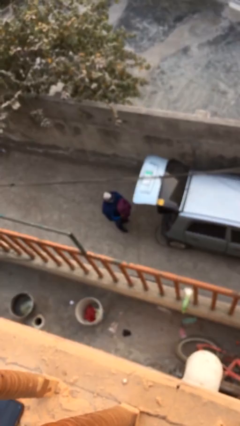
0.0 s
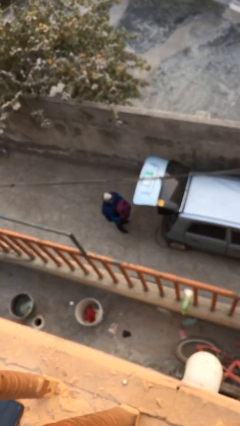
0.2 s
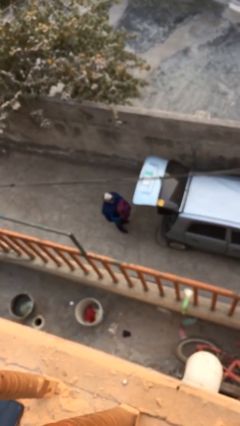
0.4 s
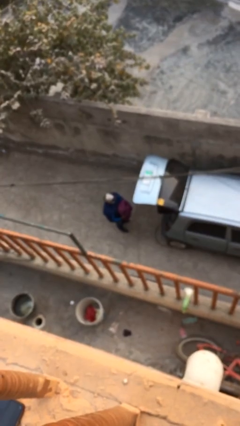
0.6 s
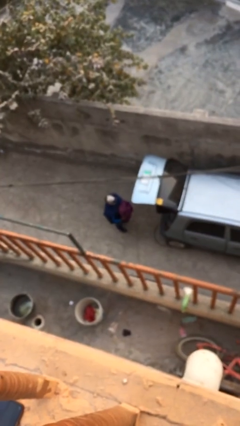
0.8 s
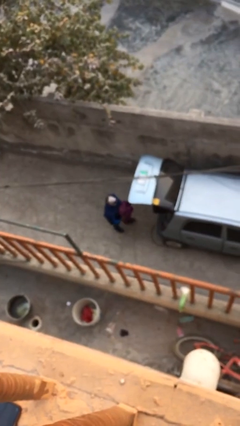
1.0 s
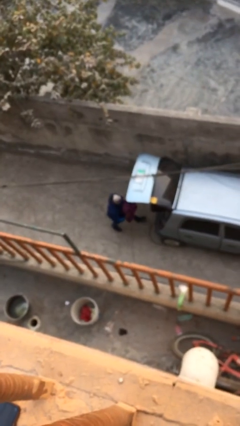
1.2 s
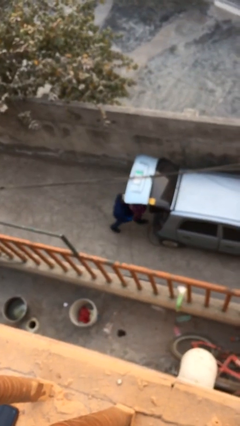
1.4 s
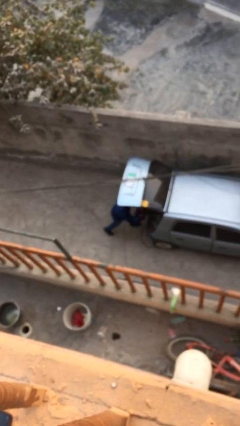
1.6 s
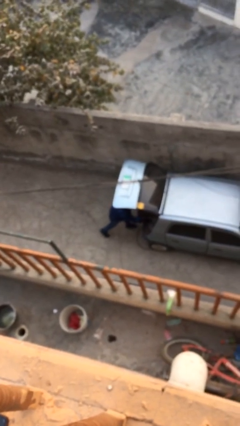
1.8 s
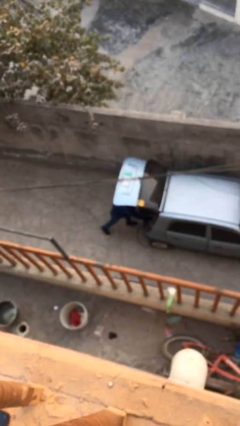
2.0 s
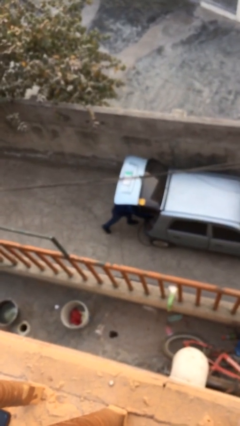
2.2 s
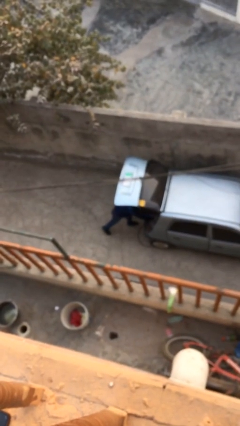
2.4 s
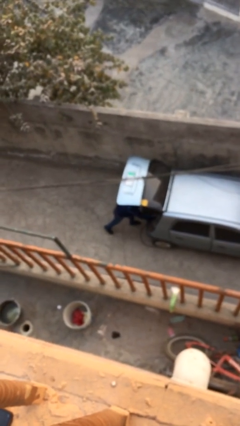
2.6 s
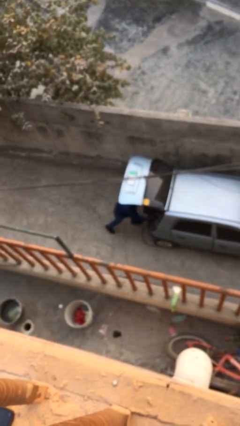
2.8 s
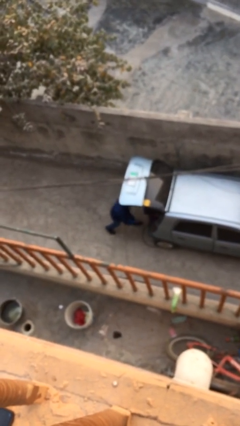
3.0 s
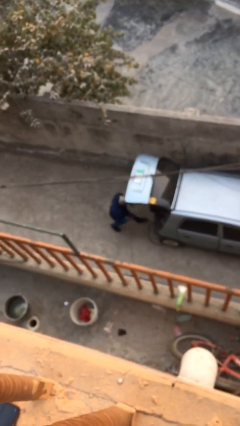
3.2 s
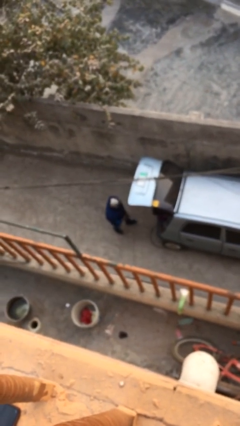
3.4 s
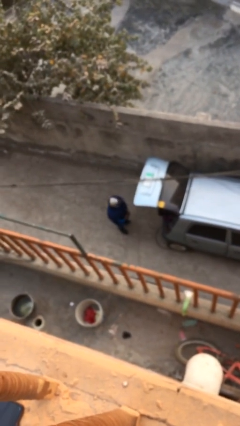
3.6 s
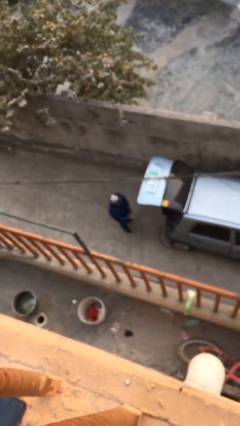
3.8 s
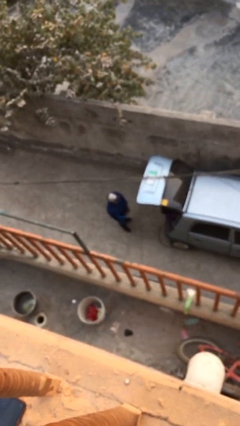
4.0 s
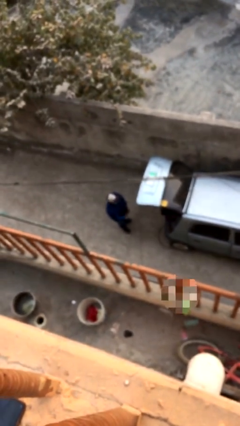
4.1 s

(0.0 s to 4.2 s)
person loads car

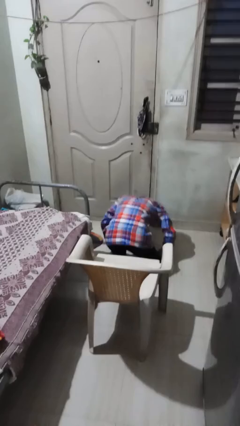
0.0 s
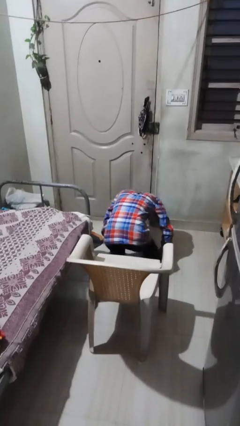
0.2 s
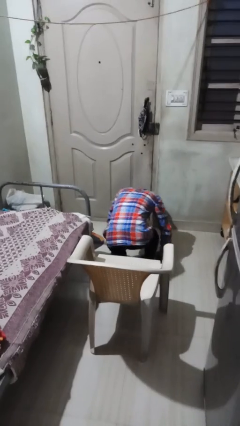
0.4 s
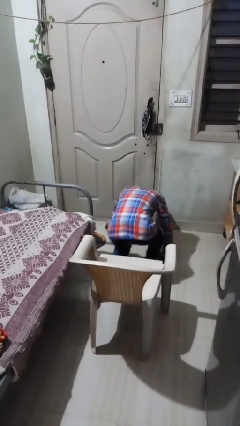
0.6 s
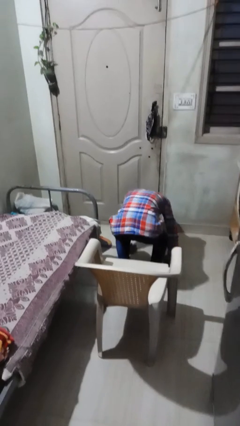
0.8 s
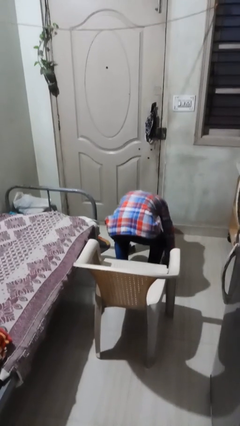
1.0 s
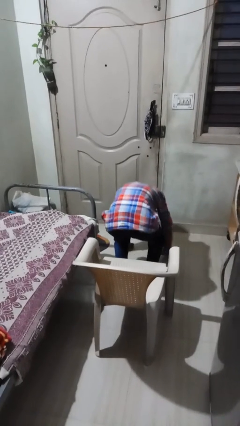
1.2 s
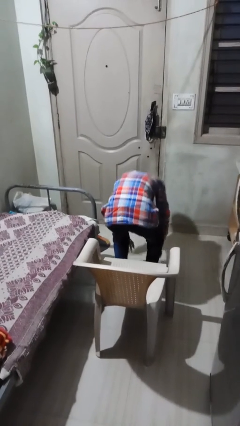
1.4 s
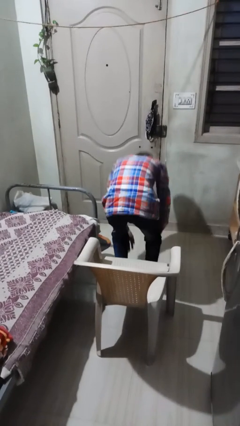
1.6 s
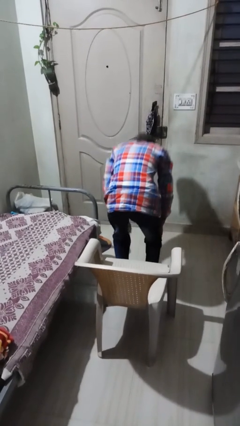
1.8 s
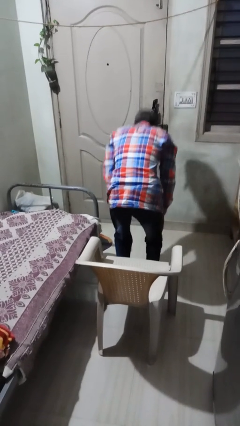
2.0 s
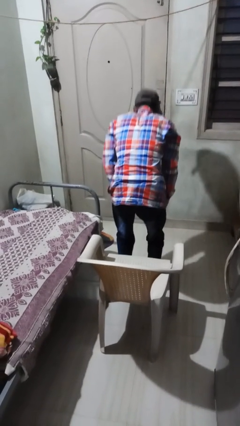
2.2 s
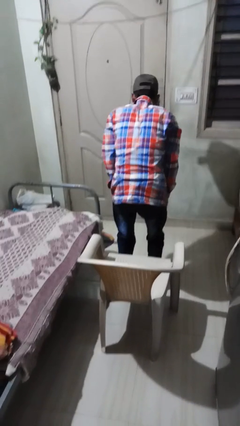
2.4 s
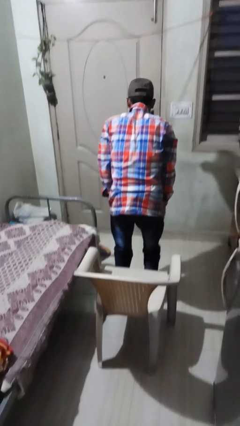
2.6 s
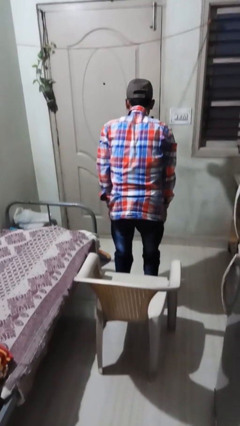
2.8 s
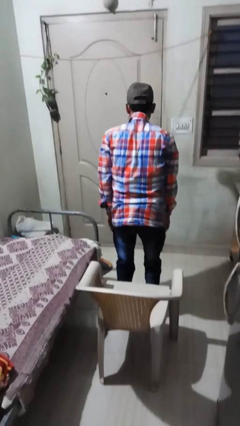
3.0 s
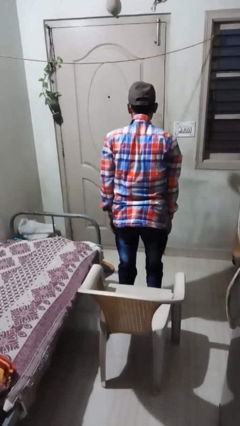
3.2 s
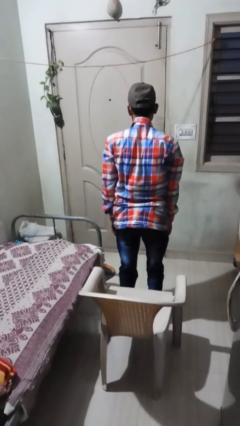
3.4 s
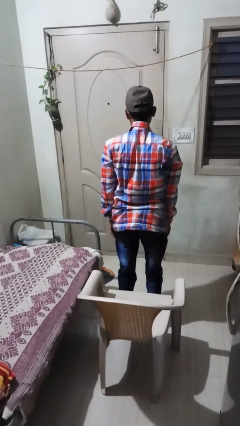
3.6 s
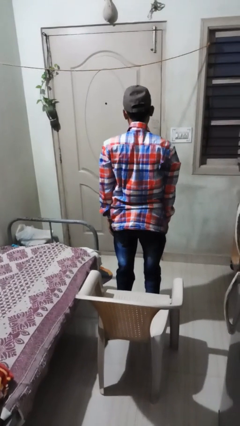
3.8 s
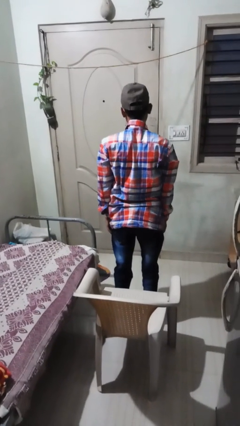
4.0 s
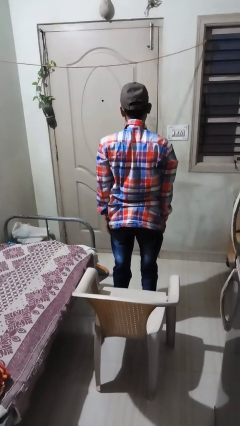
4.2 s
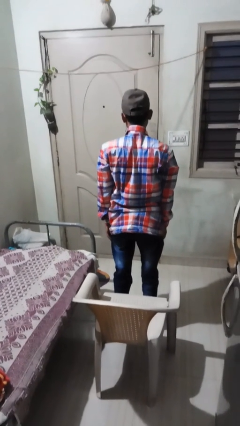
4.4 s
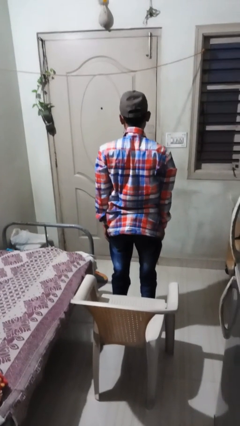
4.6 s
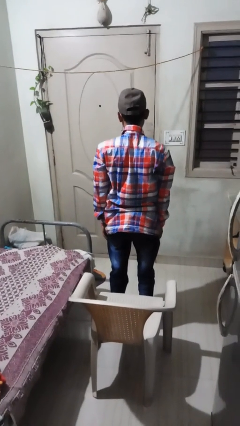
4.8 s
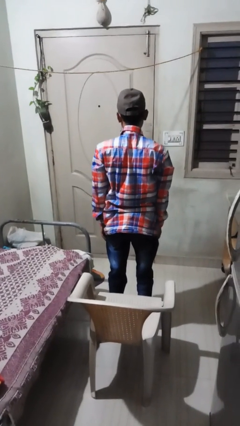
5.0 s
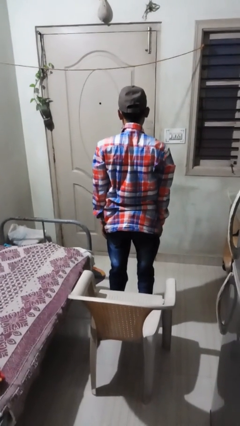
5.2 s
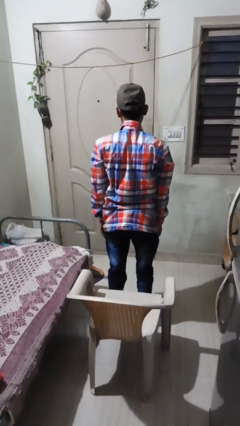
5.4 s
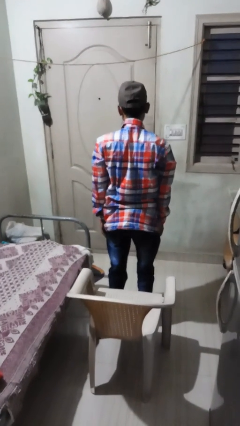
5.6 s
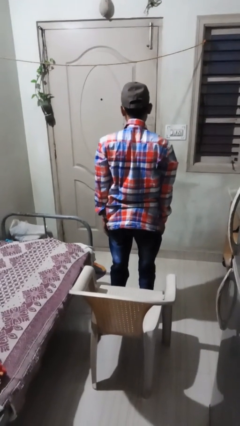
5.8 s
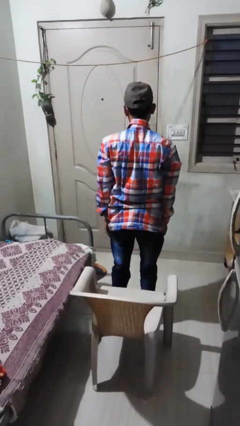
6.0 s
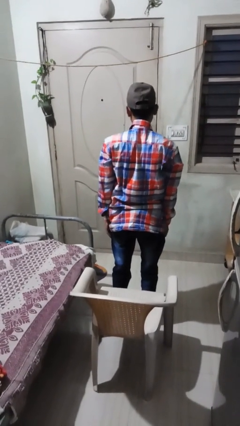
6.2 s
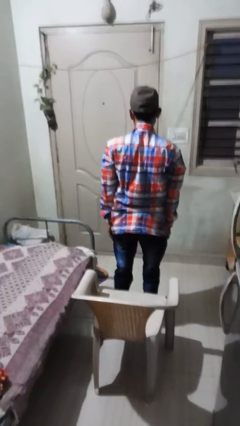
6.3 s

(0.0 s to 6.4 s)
person stands up from floor

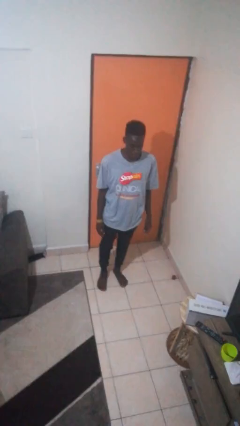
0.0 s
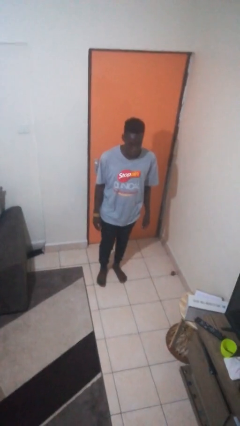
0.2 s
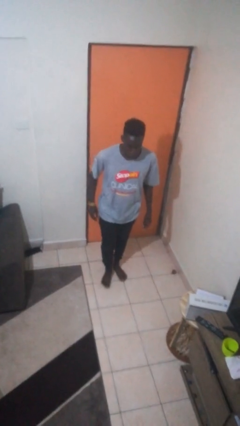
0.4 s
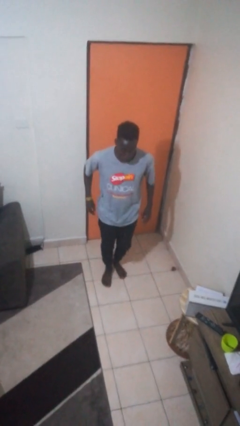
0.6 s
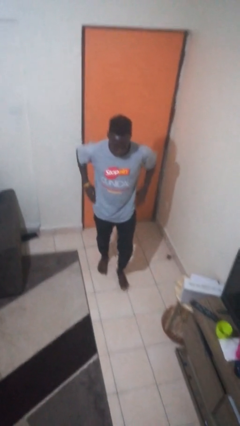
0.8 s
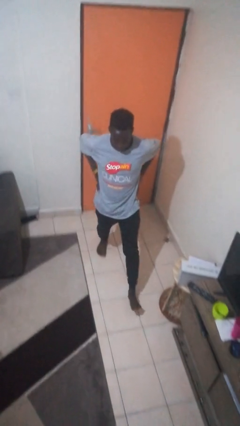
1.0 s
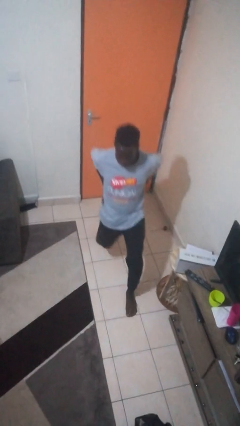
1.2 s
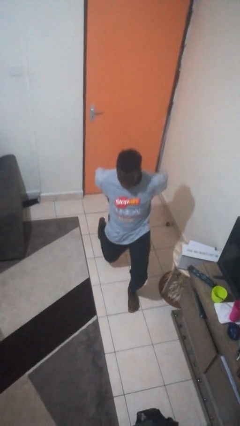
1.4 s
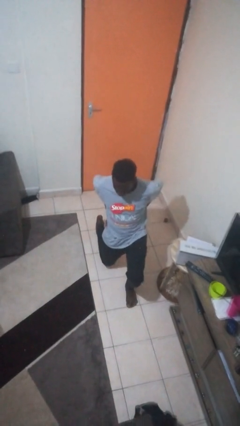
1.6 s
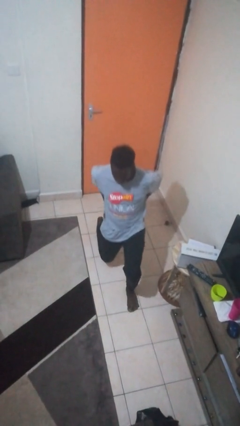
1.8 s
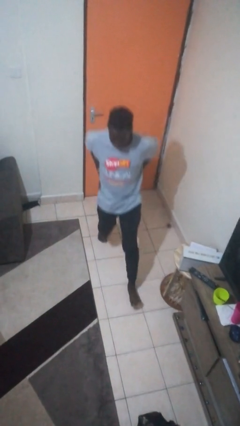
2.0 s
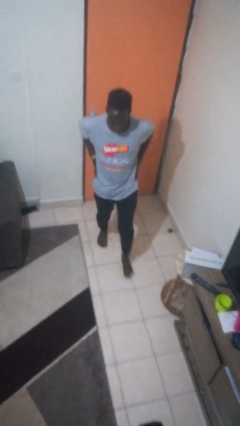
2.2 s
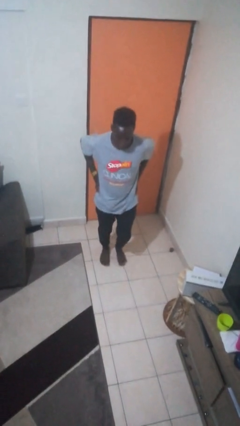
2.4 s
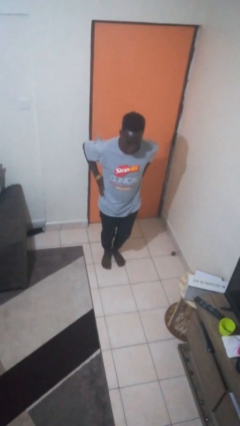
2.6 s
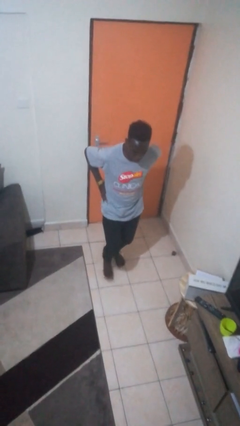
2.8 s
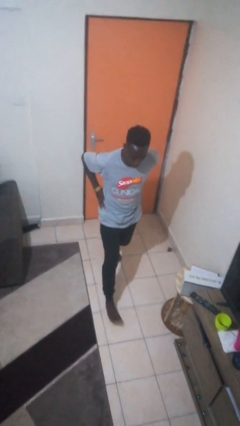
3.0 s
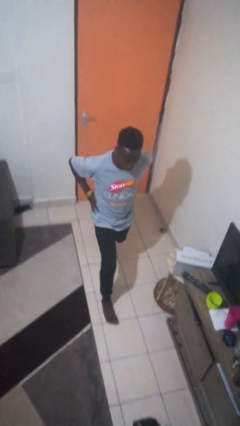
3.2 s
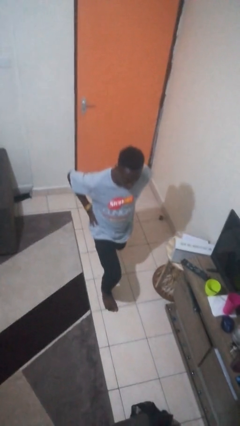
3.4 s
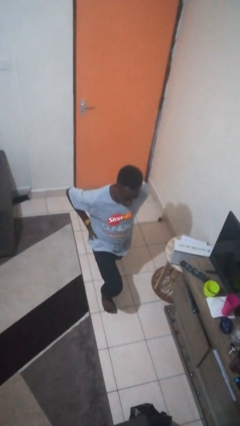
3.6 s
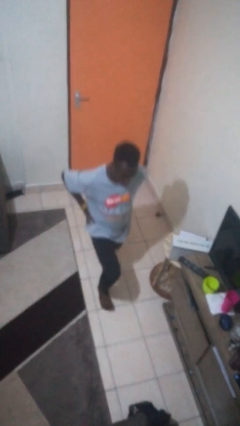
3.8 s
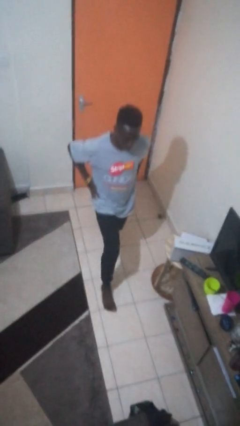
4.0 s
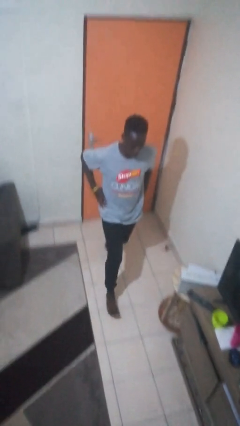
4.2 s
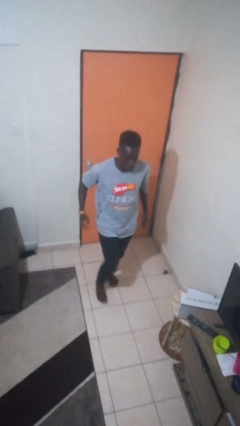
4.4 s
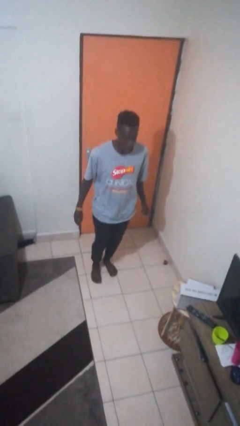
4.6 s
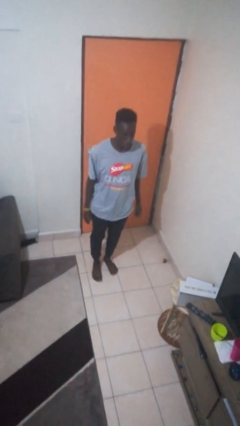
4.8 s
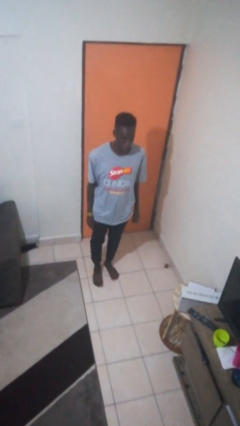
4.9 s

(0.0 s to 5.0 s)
person exercises with lunges

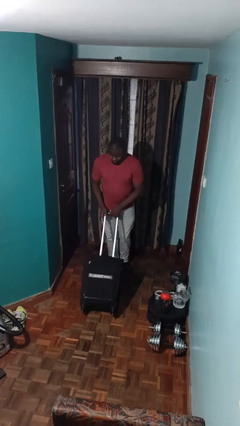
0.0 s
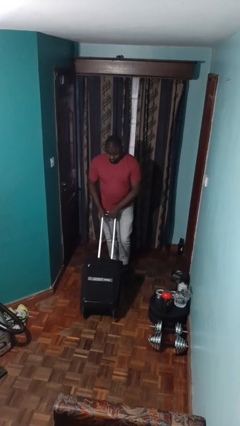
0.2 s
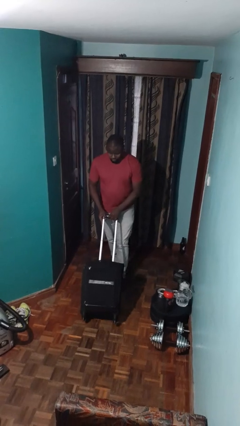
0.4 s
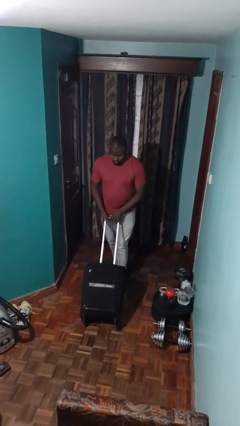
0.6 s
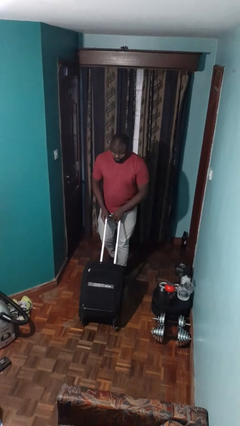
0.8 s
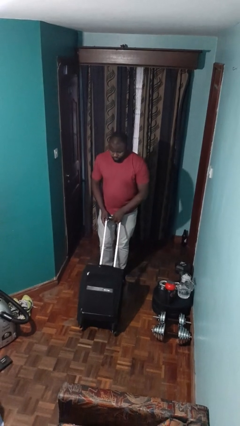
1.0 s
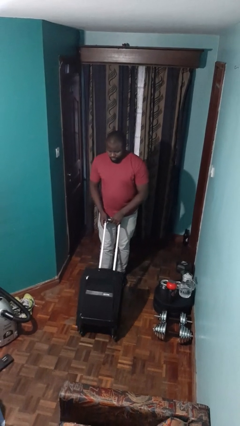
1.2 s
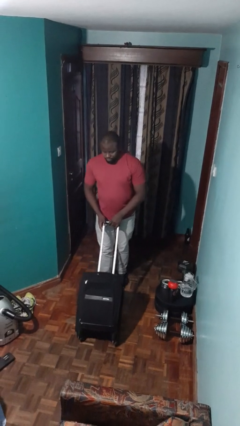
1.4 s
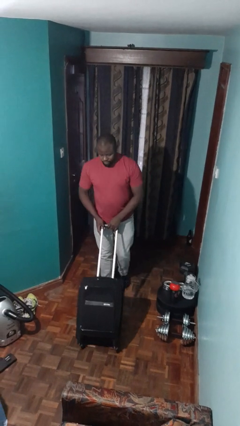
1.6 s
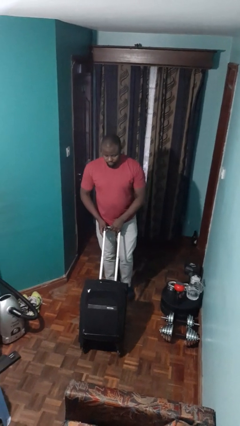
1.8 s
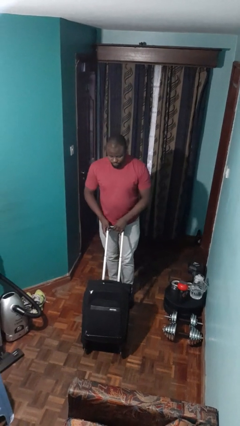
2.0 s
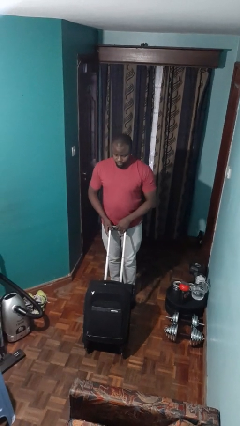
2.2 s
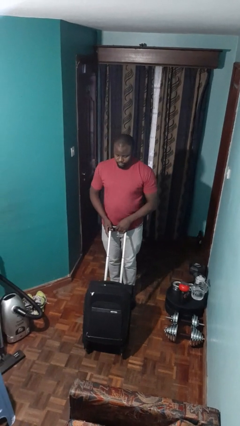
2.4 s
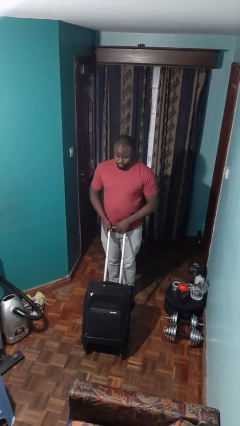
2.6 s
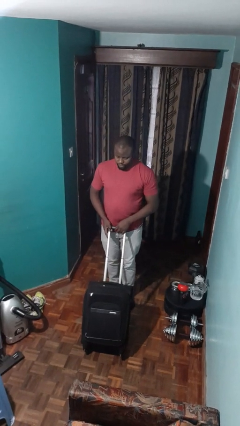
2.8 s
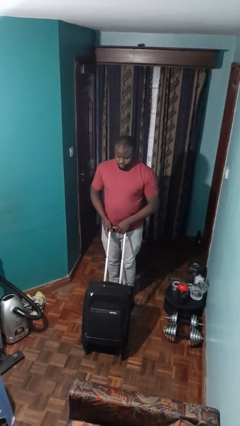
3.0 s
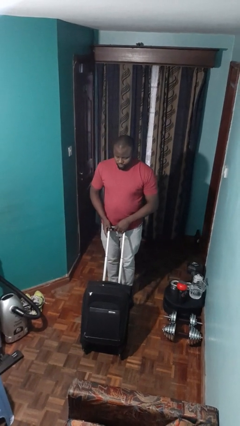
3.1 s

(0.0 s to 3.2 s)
person pushes wheeled cart
